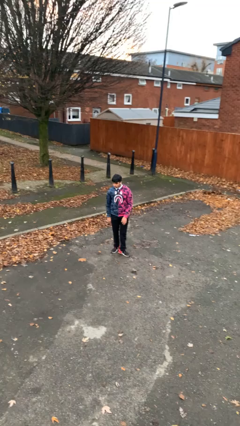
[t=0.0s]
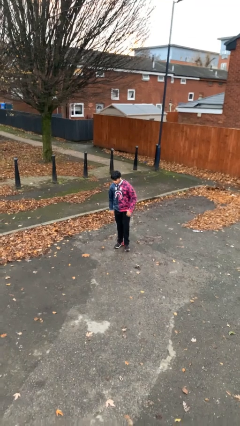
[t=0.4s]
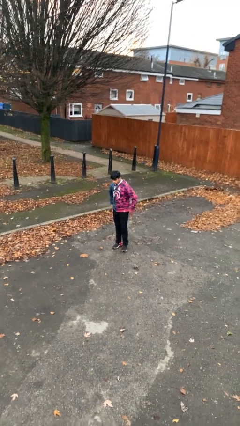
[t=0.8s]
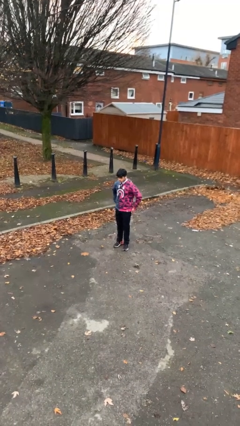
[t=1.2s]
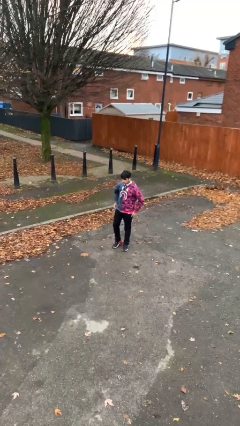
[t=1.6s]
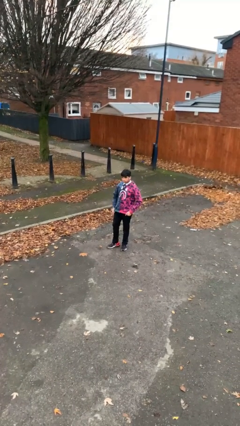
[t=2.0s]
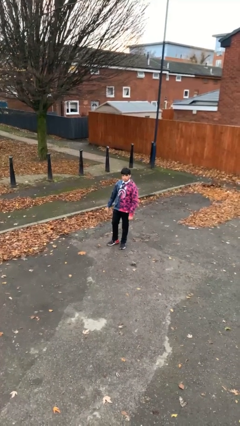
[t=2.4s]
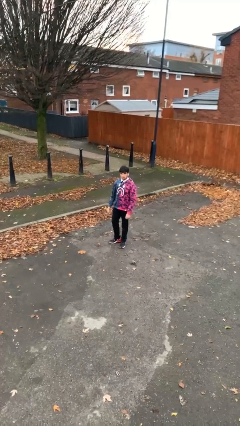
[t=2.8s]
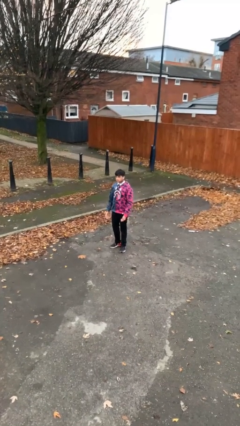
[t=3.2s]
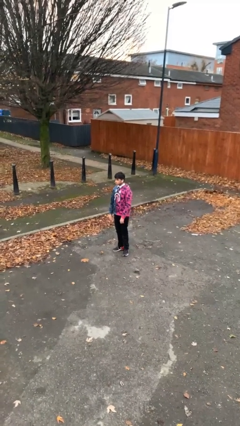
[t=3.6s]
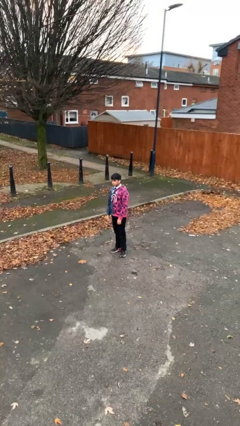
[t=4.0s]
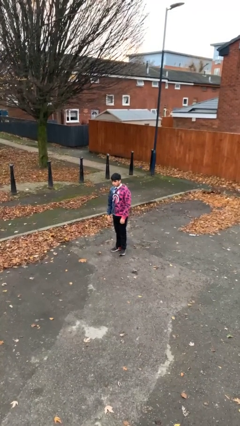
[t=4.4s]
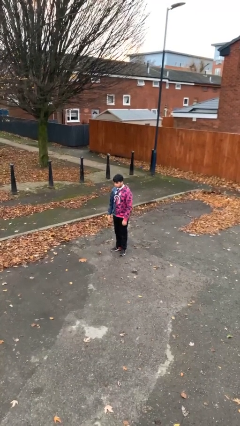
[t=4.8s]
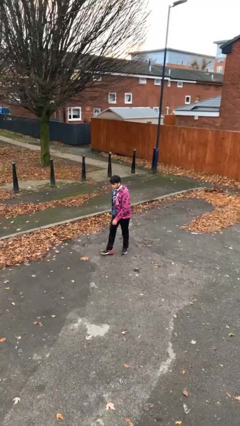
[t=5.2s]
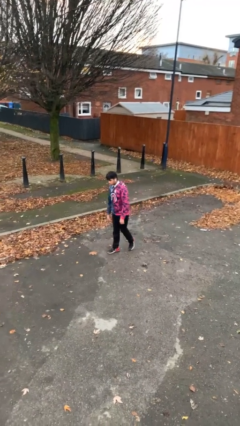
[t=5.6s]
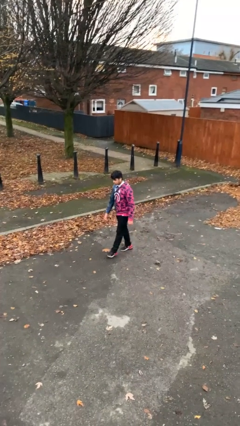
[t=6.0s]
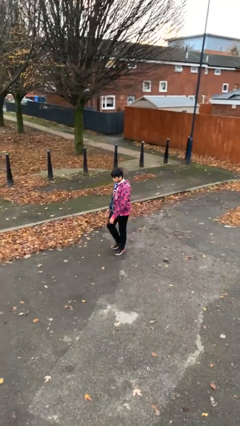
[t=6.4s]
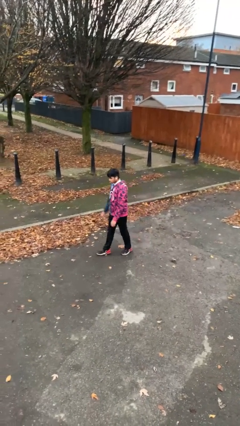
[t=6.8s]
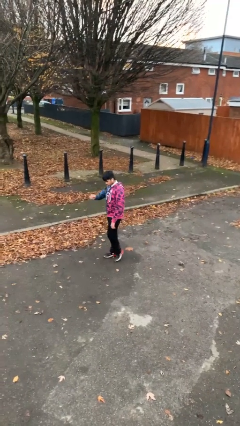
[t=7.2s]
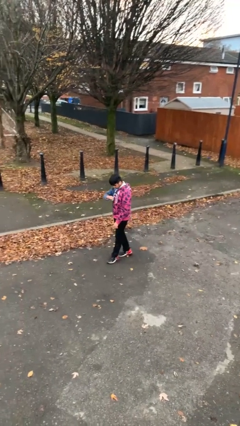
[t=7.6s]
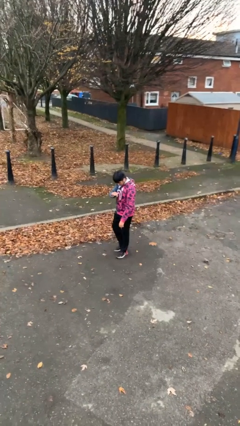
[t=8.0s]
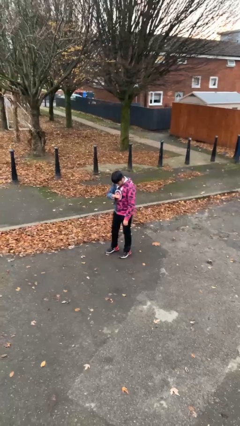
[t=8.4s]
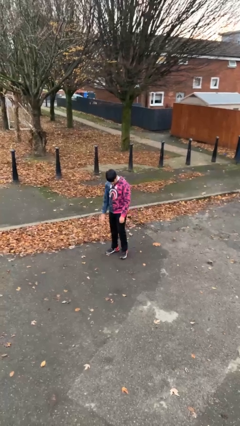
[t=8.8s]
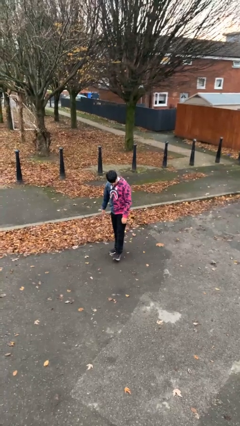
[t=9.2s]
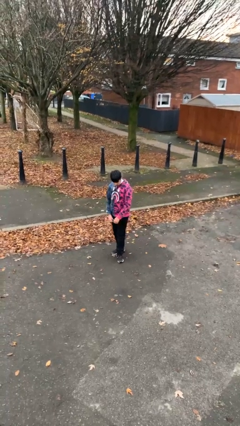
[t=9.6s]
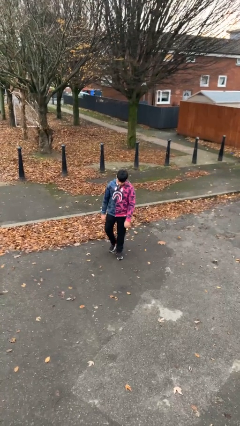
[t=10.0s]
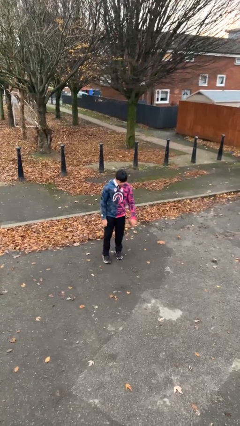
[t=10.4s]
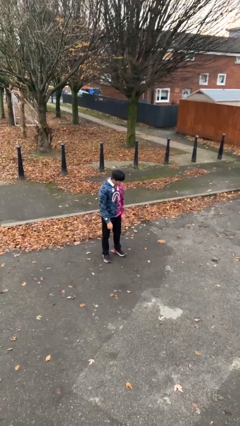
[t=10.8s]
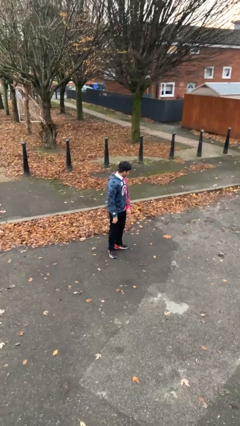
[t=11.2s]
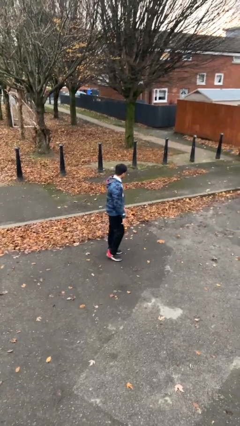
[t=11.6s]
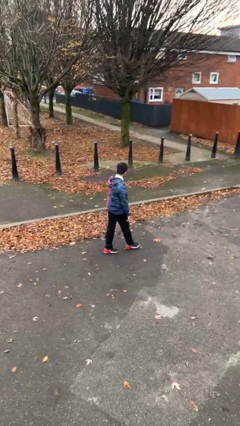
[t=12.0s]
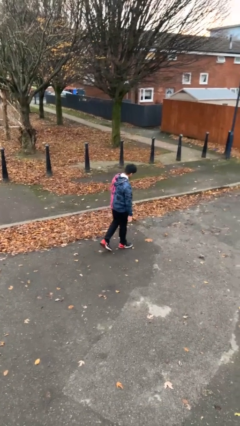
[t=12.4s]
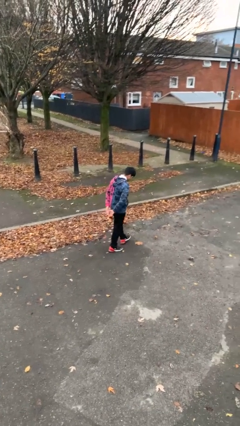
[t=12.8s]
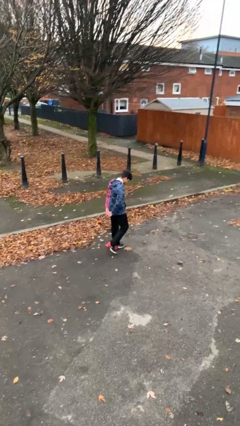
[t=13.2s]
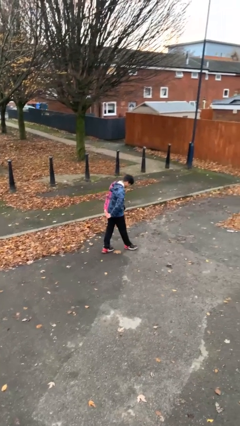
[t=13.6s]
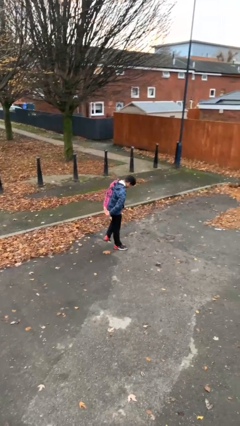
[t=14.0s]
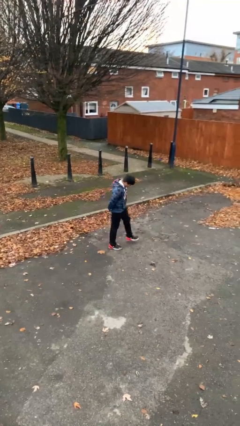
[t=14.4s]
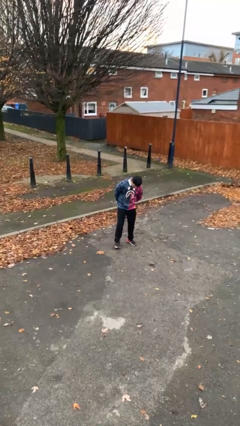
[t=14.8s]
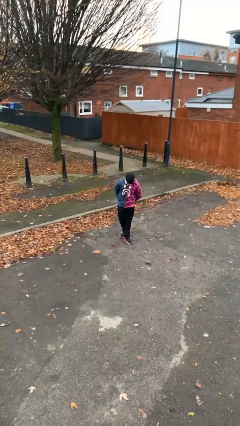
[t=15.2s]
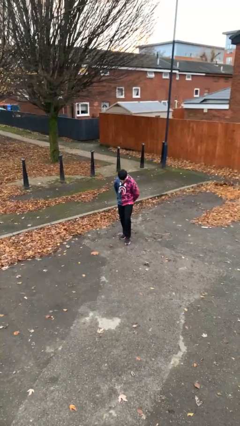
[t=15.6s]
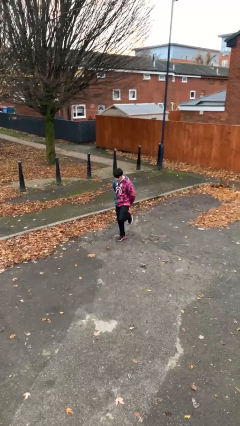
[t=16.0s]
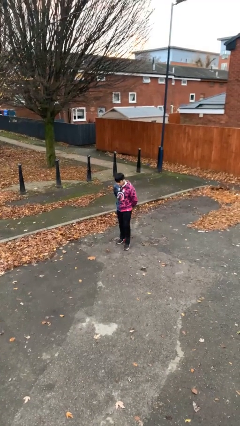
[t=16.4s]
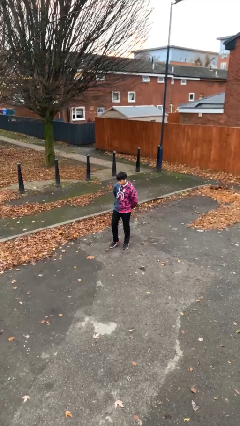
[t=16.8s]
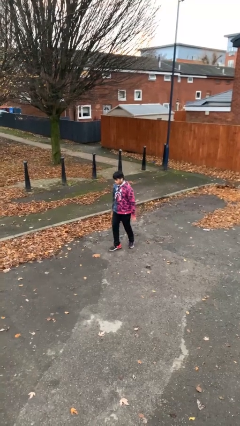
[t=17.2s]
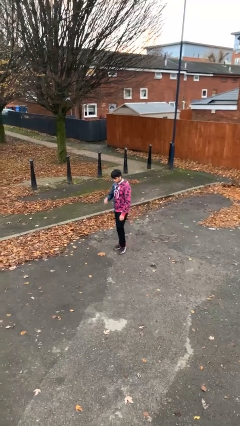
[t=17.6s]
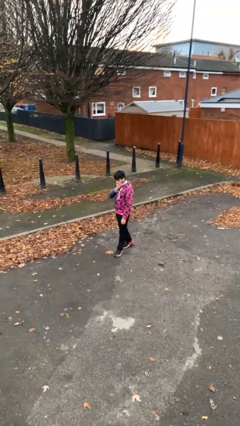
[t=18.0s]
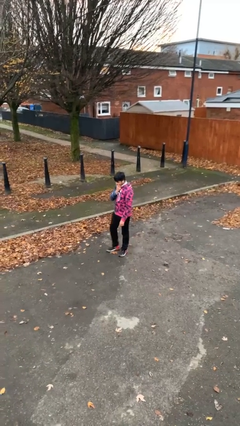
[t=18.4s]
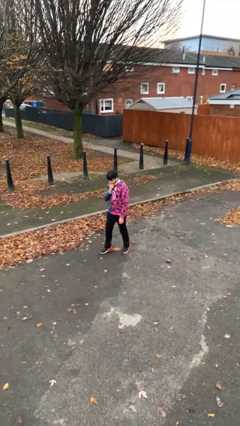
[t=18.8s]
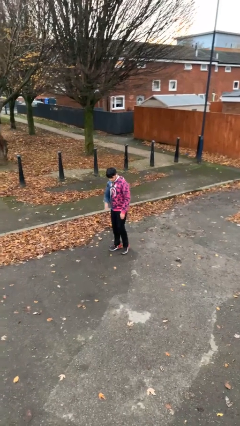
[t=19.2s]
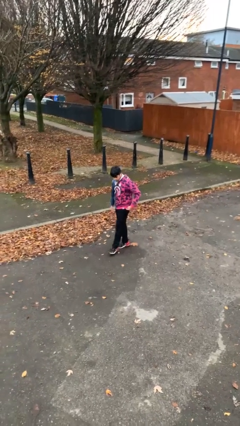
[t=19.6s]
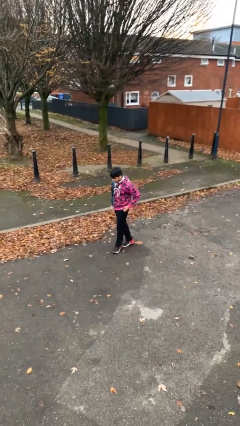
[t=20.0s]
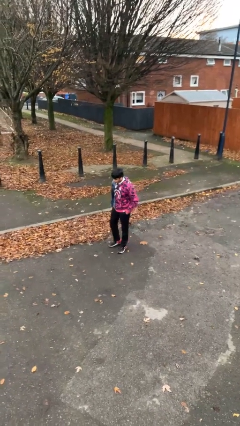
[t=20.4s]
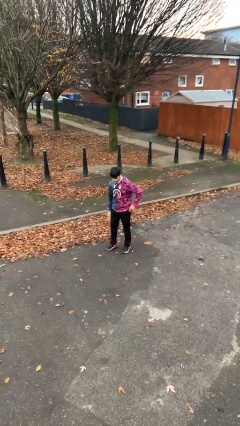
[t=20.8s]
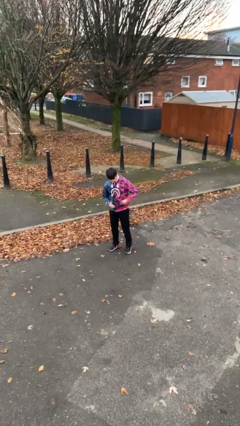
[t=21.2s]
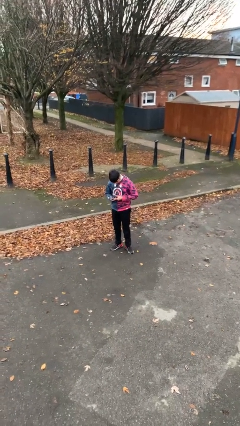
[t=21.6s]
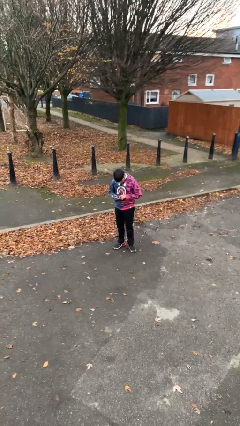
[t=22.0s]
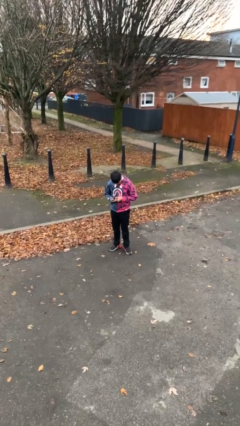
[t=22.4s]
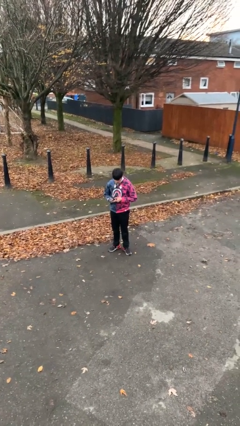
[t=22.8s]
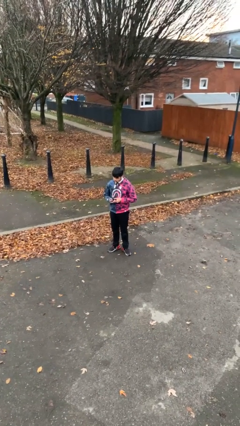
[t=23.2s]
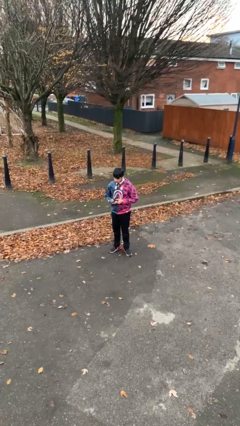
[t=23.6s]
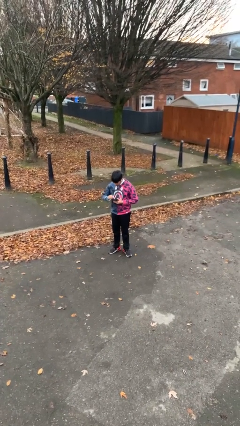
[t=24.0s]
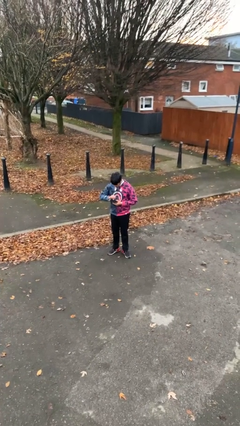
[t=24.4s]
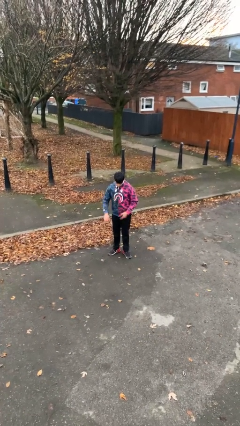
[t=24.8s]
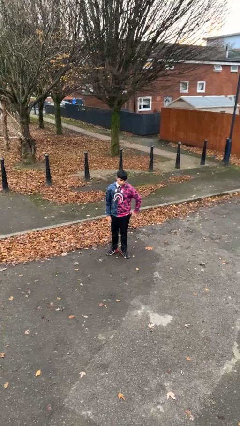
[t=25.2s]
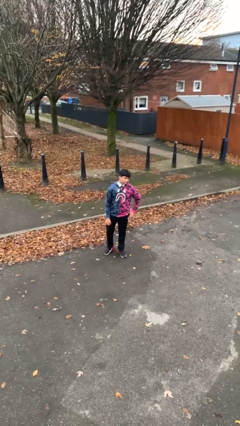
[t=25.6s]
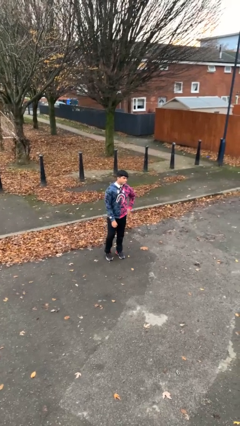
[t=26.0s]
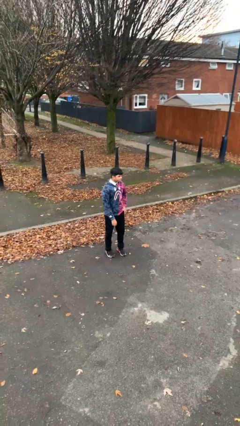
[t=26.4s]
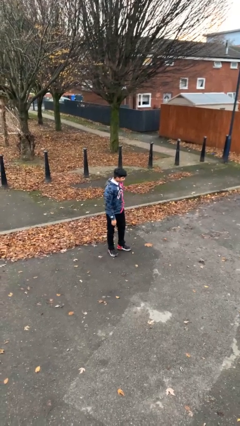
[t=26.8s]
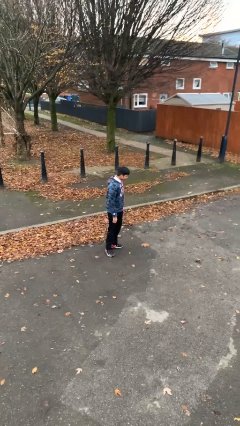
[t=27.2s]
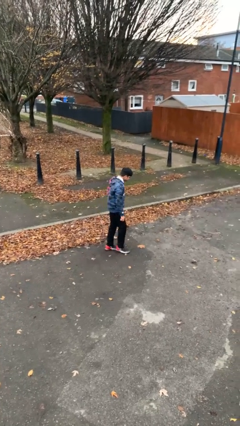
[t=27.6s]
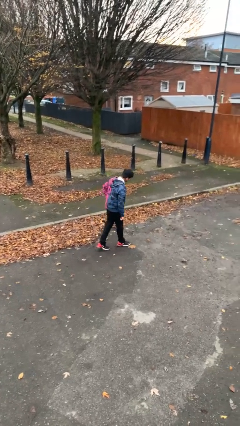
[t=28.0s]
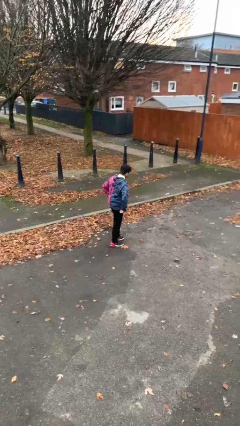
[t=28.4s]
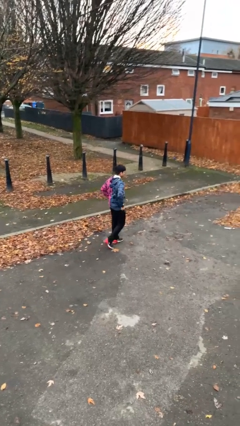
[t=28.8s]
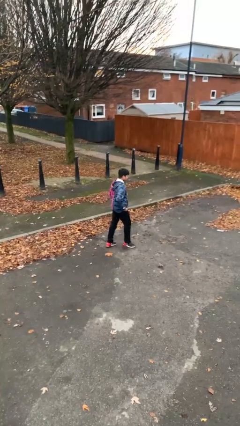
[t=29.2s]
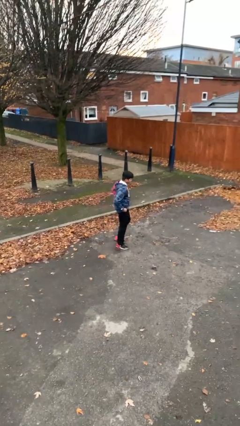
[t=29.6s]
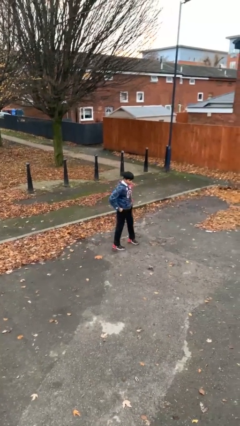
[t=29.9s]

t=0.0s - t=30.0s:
person walks

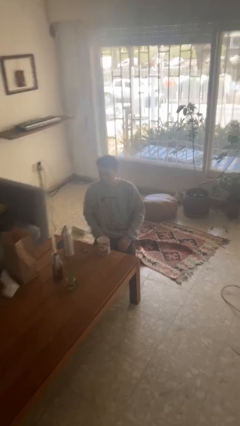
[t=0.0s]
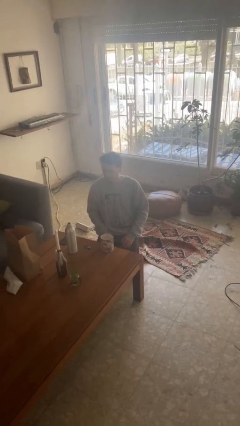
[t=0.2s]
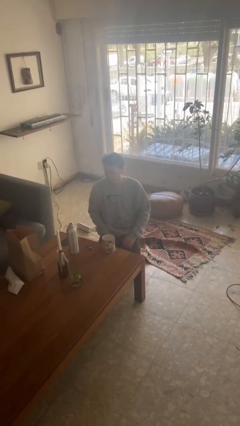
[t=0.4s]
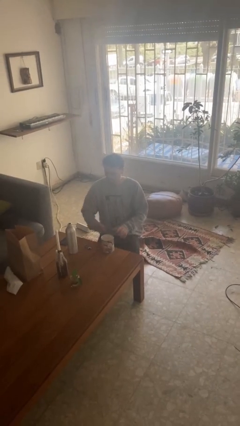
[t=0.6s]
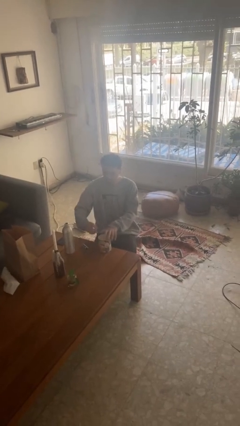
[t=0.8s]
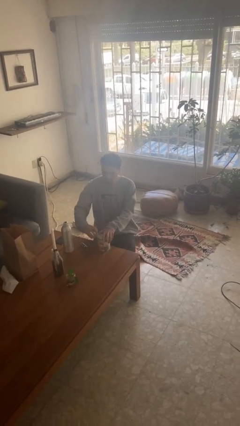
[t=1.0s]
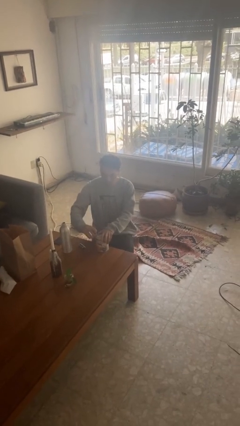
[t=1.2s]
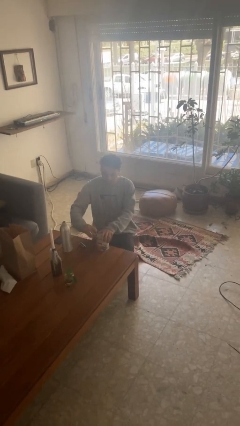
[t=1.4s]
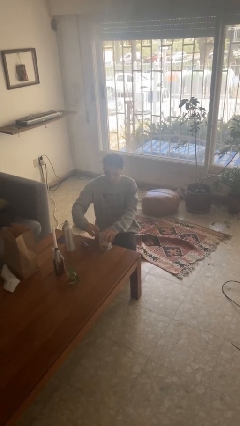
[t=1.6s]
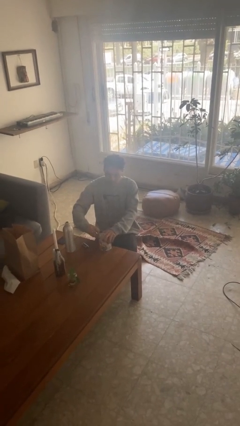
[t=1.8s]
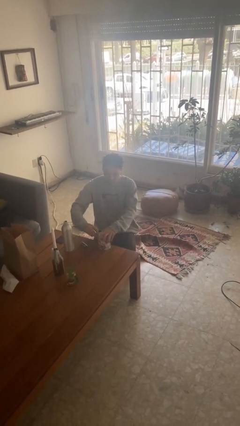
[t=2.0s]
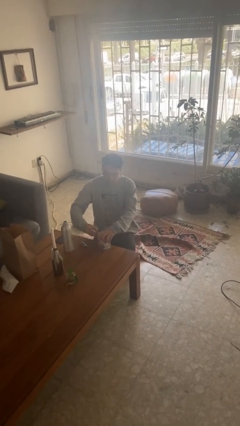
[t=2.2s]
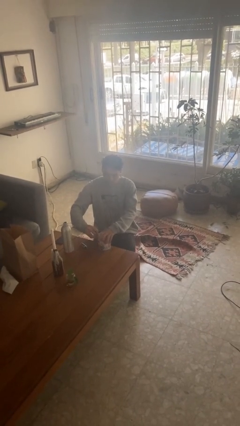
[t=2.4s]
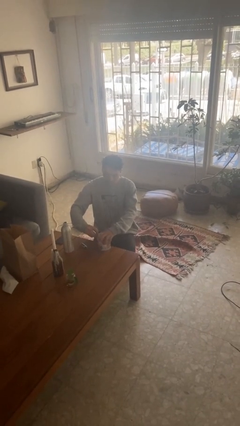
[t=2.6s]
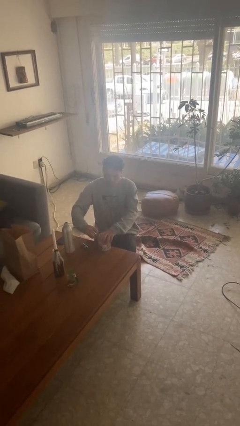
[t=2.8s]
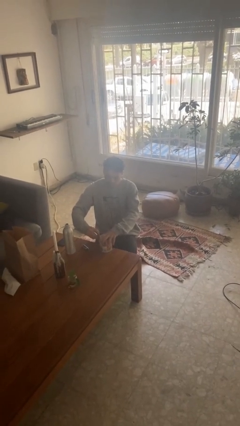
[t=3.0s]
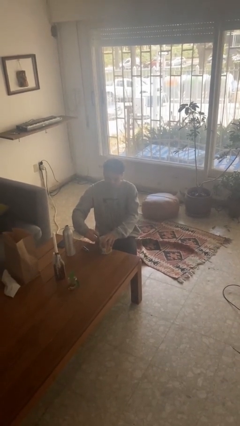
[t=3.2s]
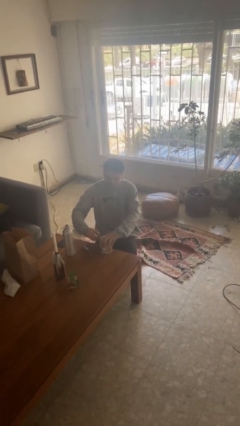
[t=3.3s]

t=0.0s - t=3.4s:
person opens can with can opener
